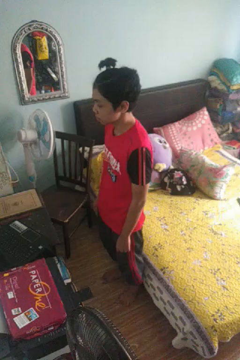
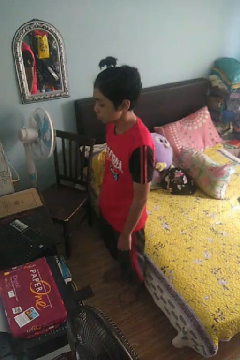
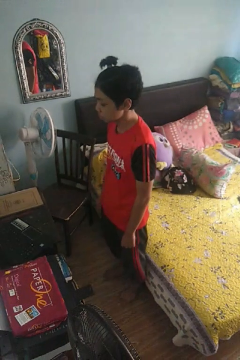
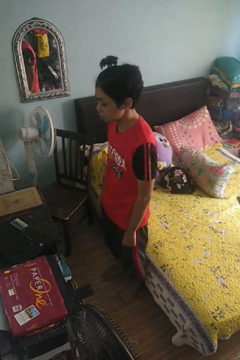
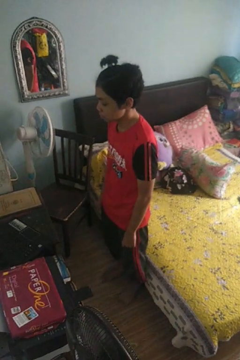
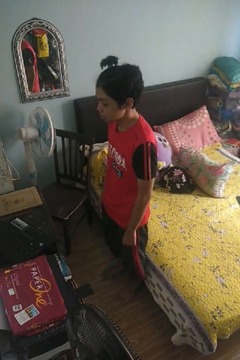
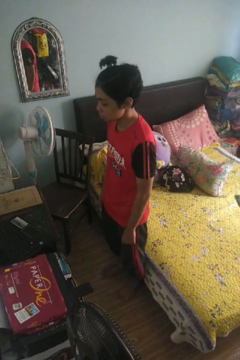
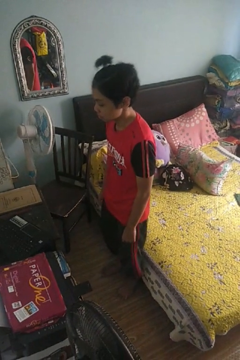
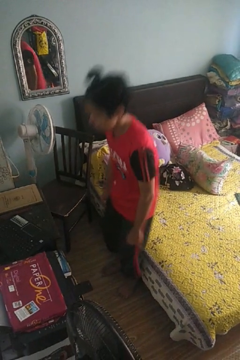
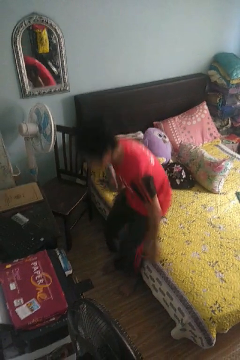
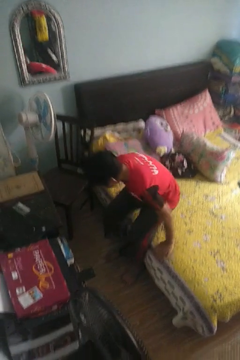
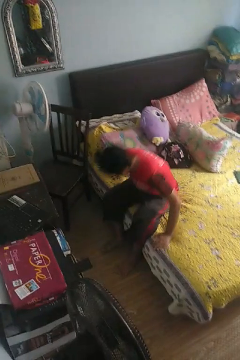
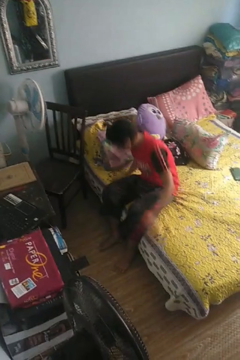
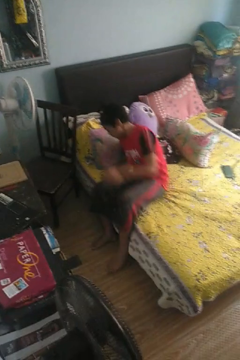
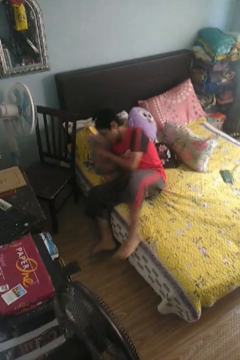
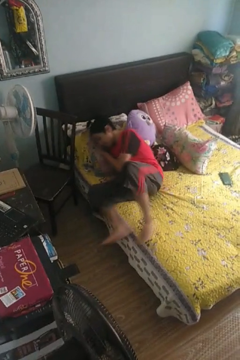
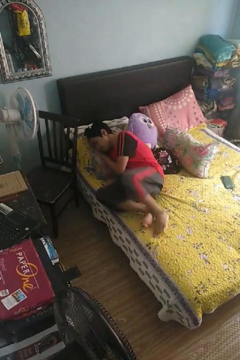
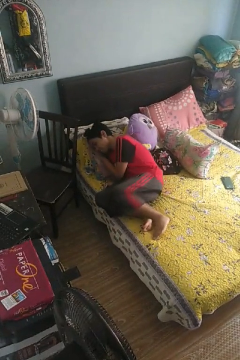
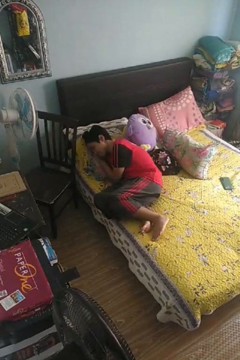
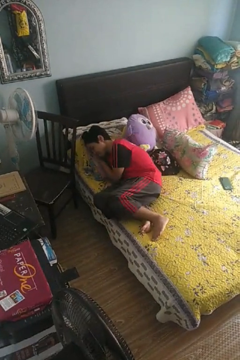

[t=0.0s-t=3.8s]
person lies down on bed

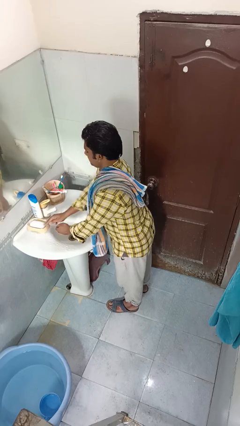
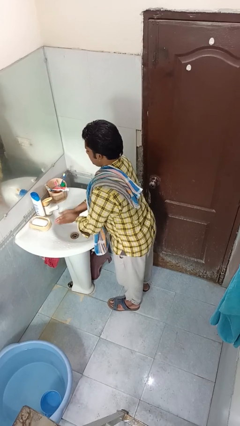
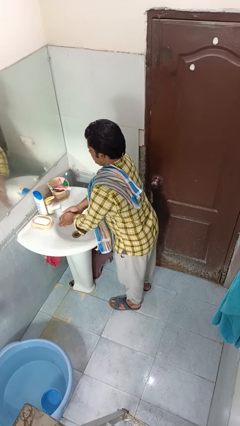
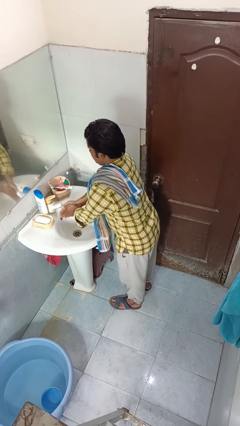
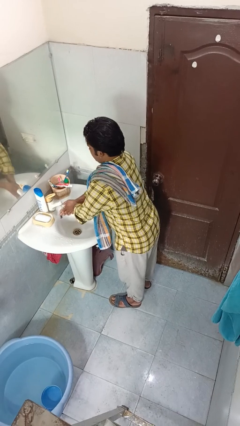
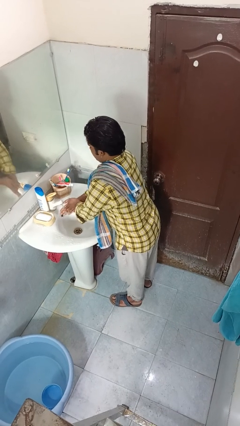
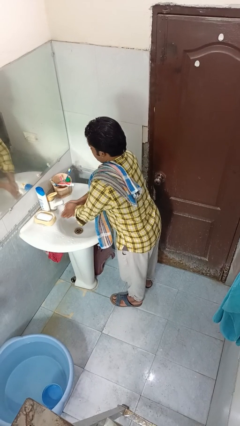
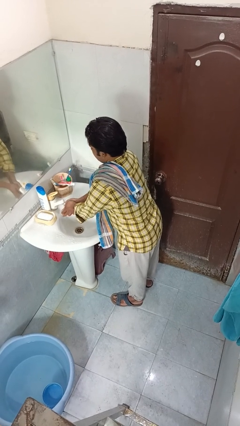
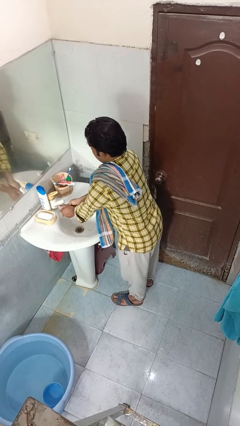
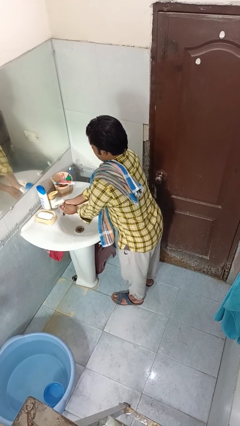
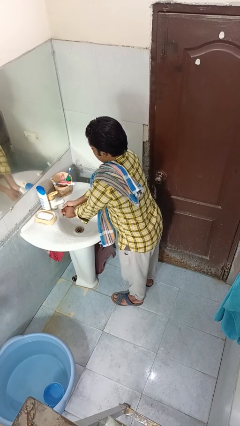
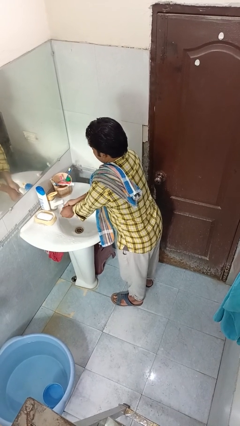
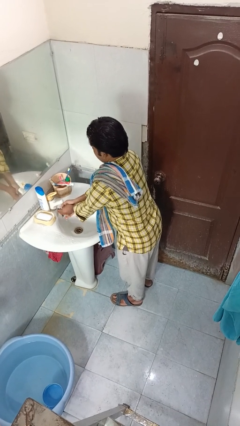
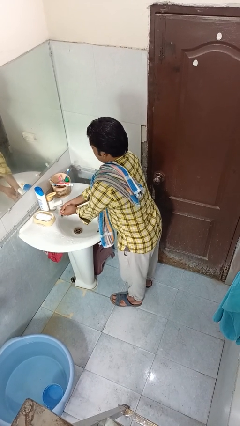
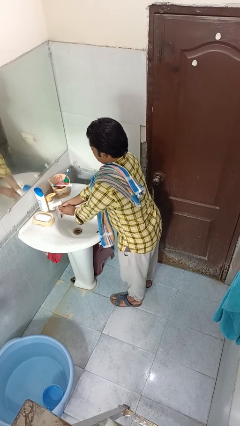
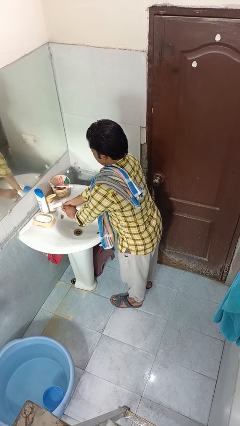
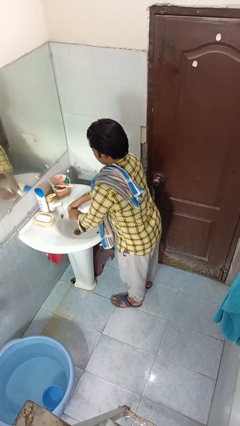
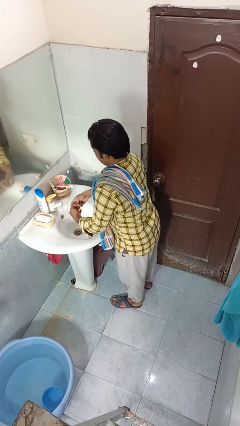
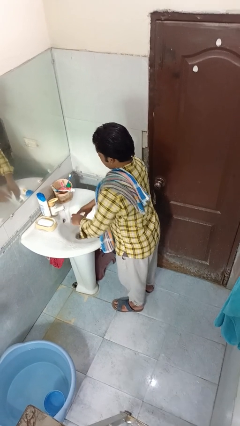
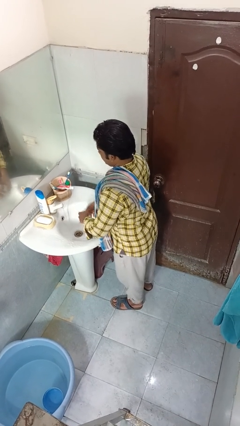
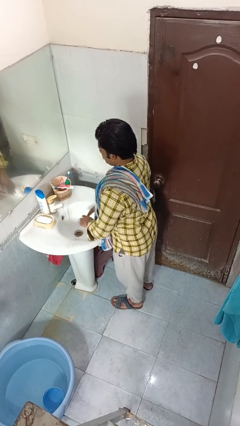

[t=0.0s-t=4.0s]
person washes hands

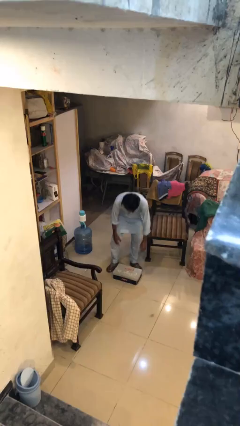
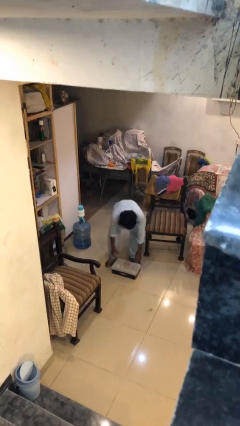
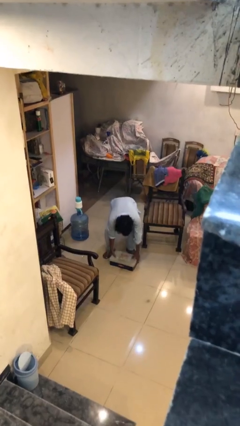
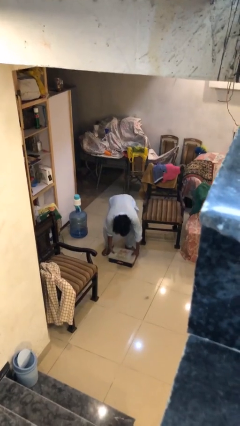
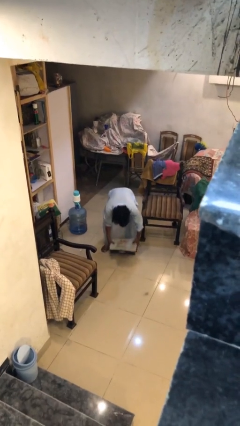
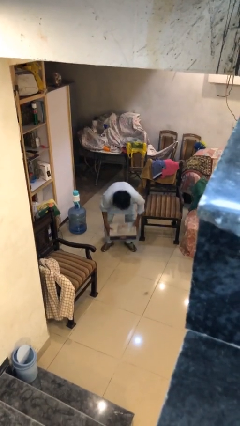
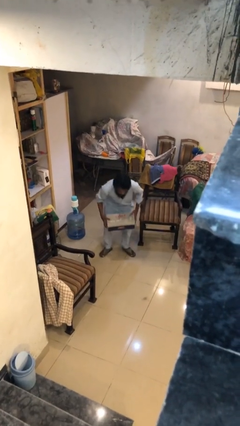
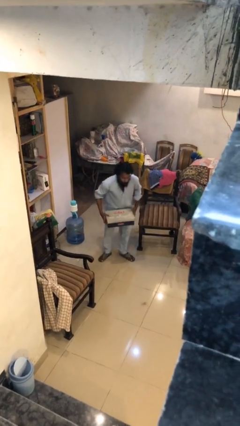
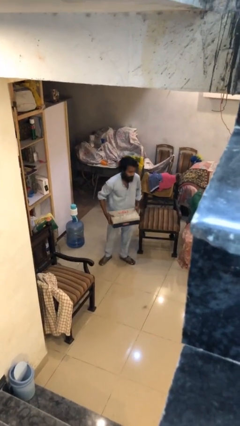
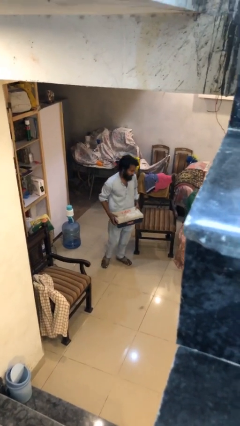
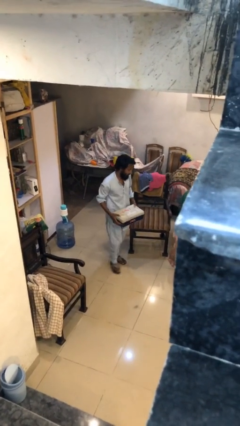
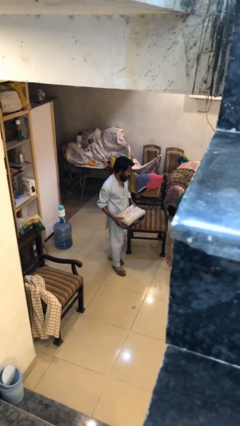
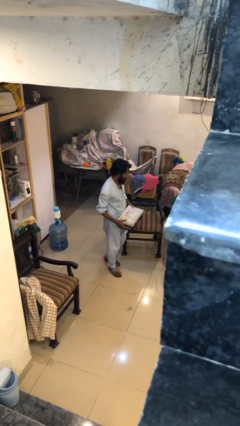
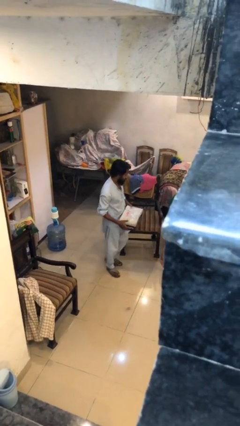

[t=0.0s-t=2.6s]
person picks up object from floor

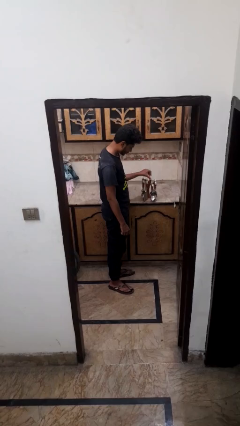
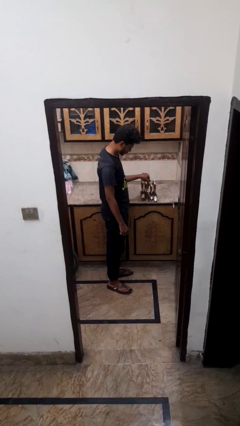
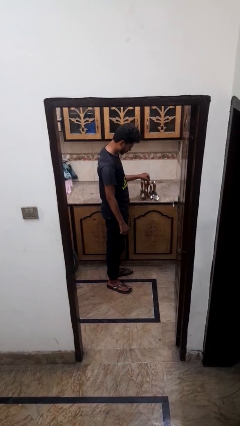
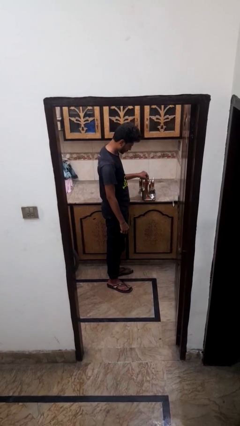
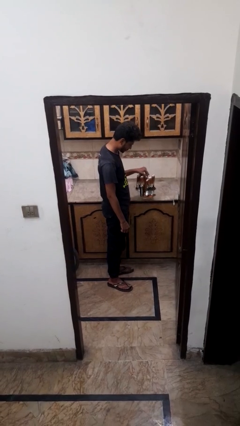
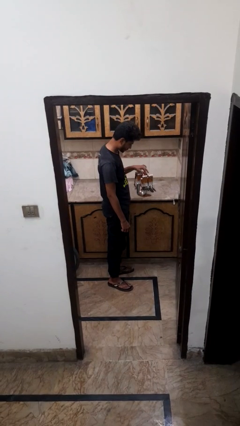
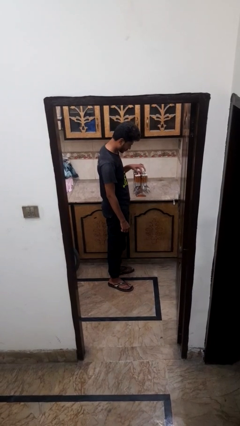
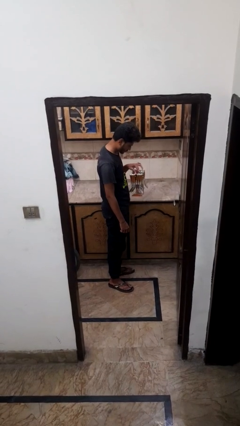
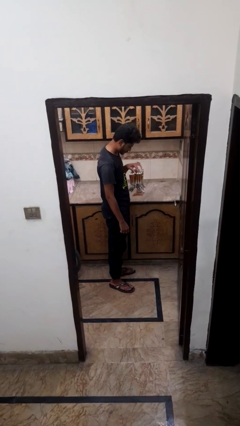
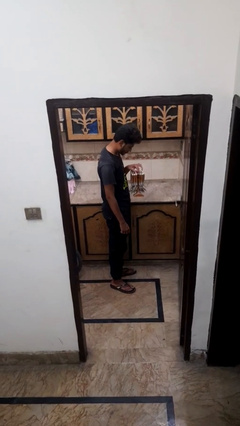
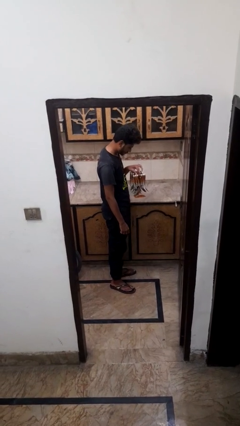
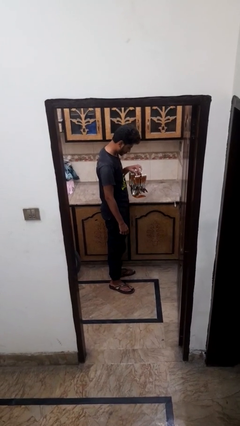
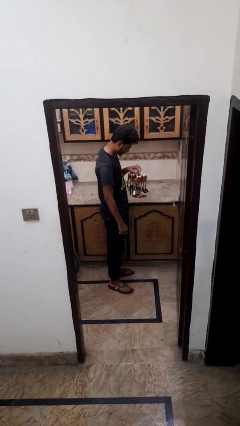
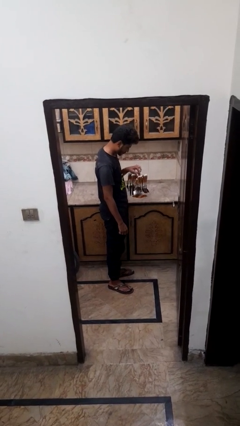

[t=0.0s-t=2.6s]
person picks up object from countertop

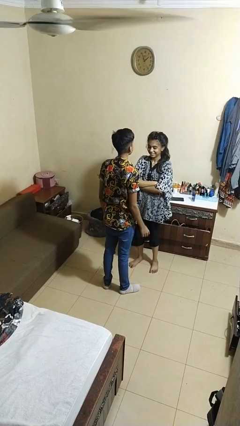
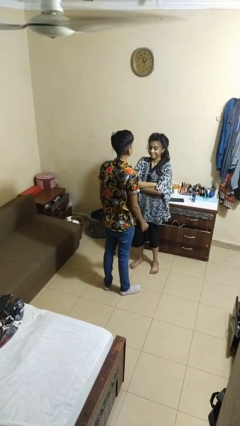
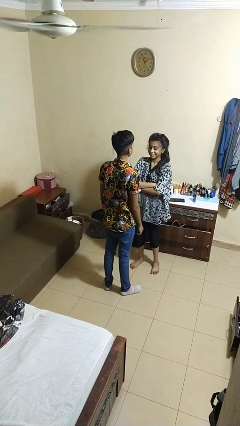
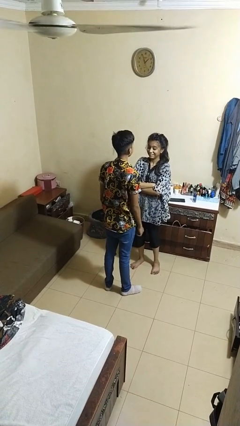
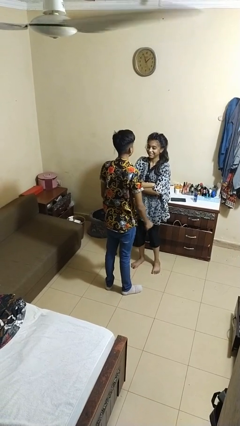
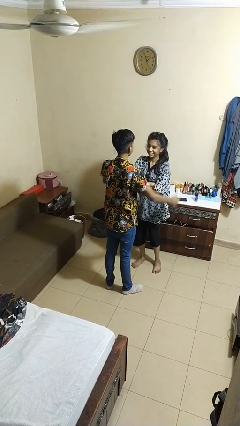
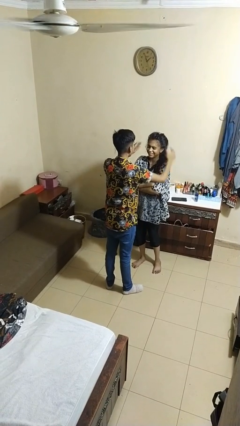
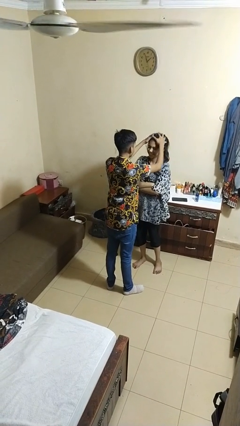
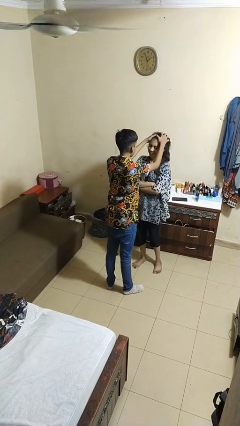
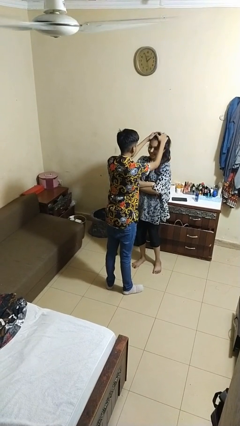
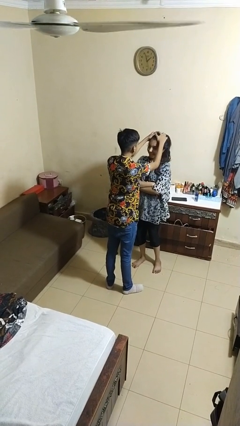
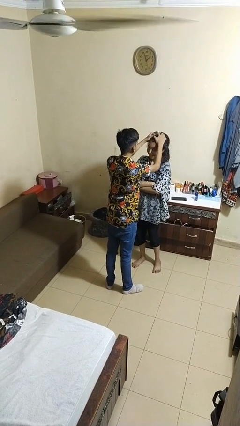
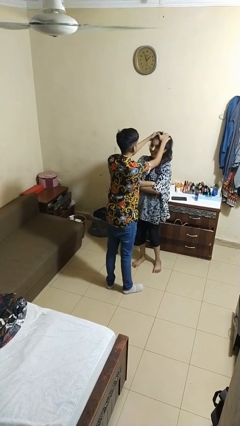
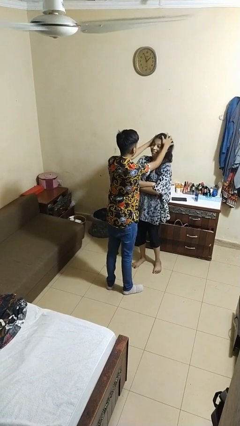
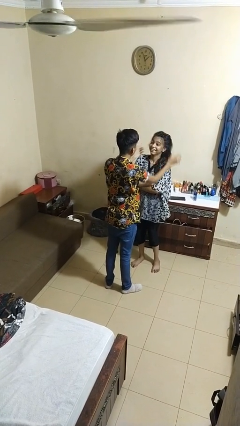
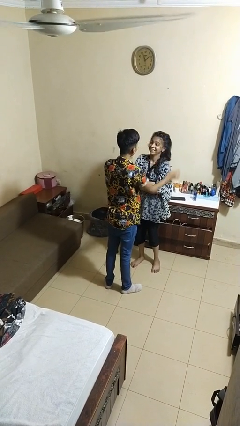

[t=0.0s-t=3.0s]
person grabs person by hair

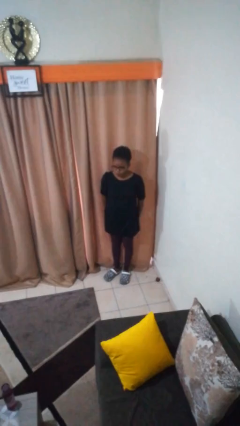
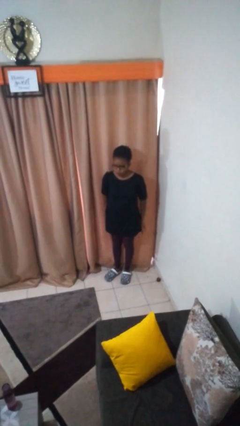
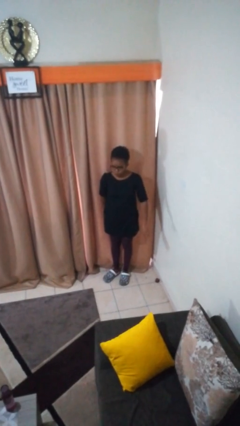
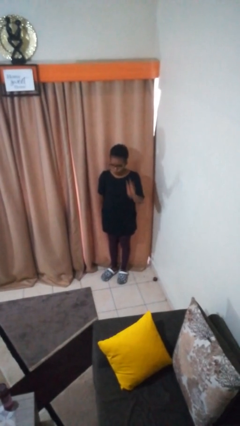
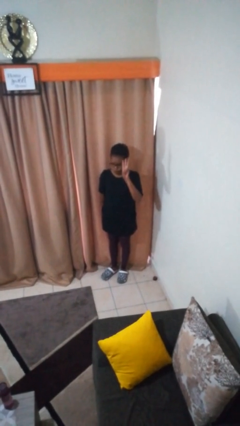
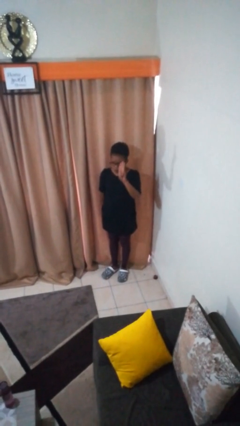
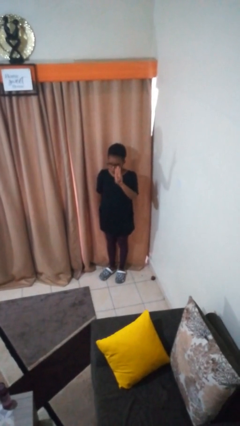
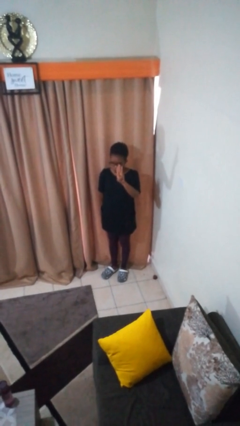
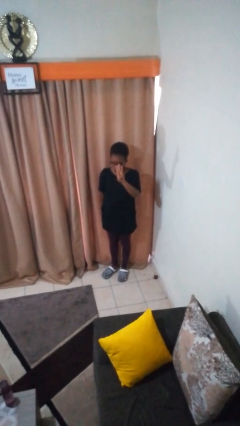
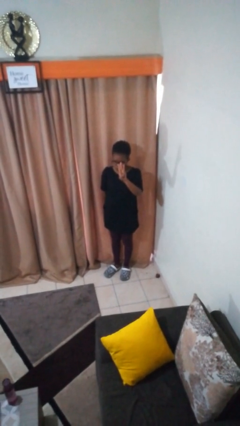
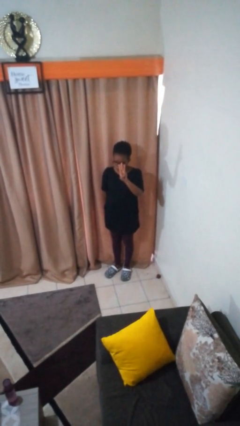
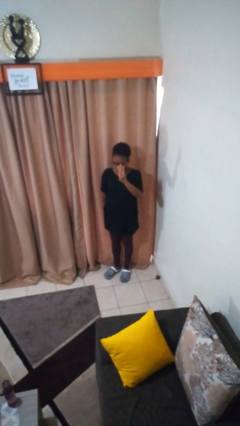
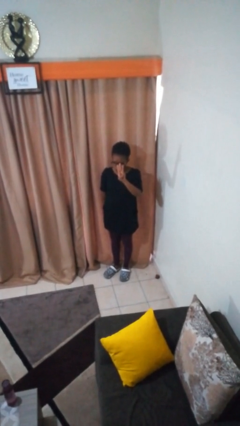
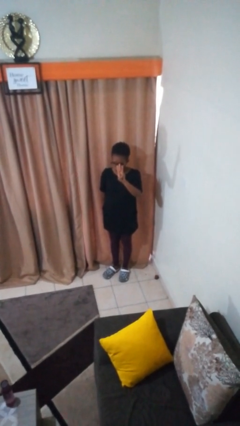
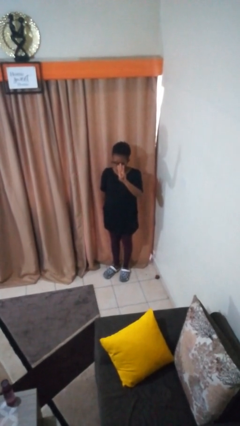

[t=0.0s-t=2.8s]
person gestures number three
